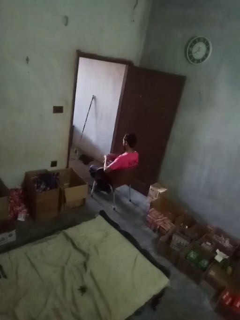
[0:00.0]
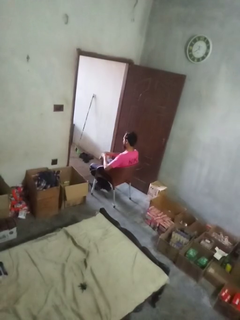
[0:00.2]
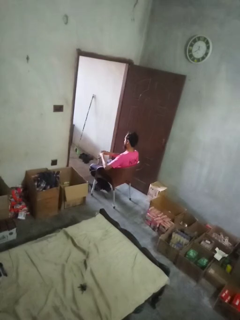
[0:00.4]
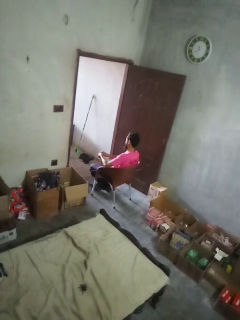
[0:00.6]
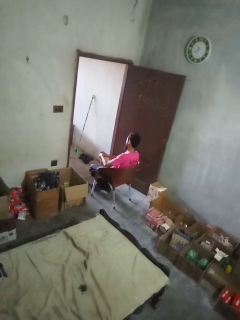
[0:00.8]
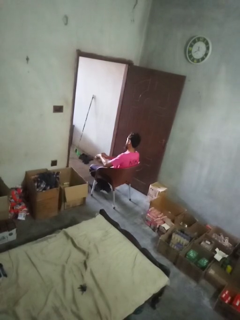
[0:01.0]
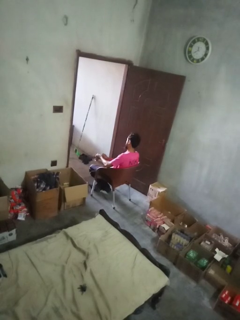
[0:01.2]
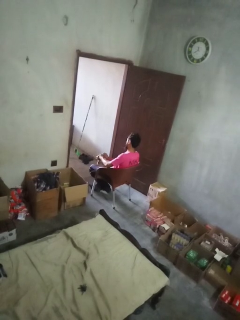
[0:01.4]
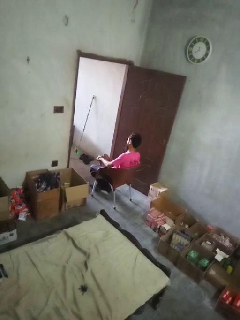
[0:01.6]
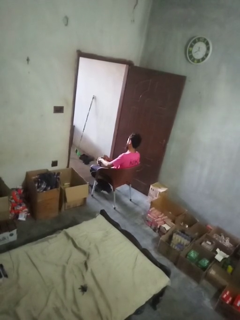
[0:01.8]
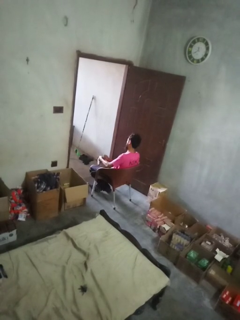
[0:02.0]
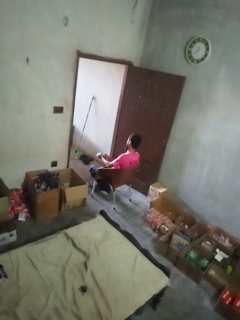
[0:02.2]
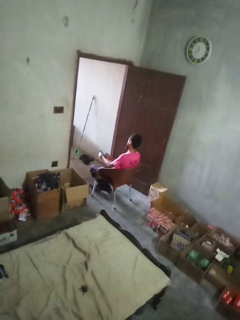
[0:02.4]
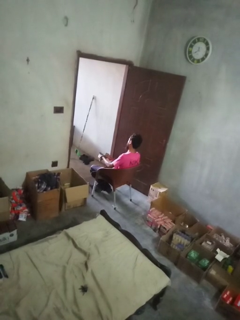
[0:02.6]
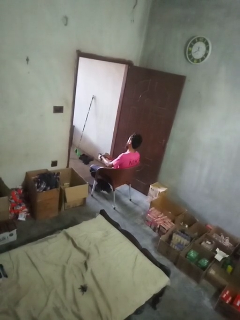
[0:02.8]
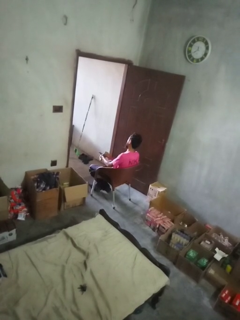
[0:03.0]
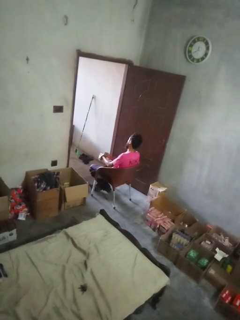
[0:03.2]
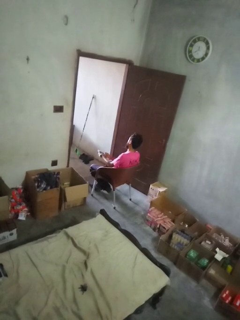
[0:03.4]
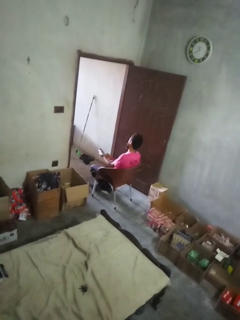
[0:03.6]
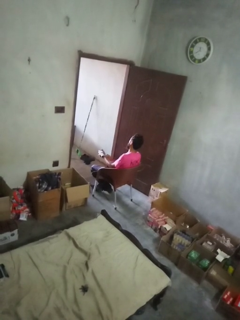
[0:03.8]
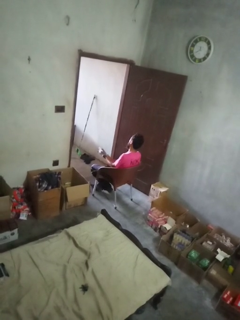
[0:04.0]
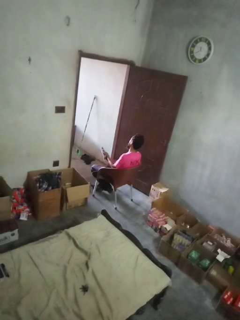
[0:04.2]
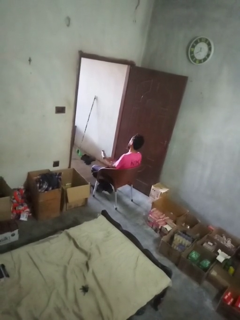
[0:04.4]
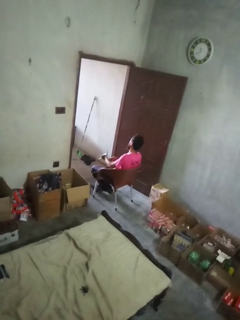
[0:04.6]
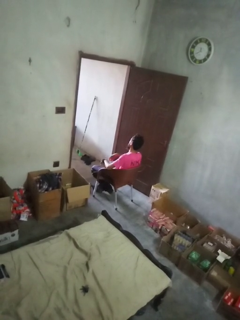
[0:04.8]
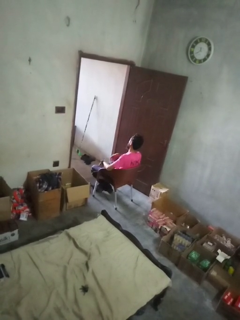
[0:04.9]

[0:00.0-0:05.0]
person puts on gloves

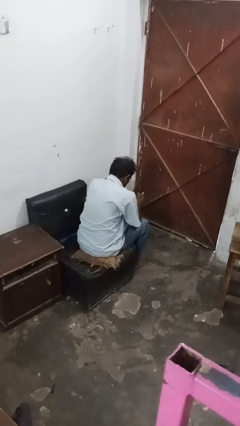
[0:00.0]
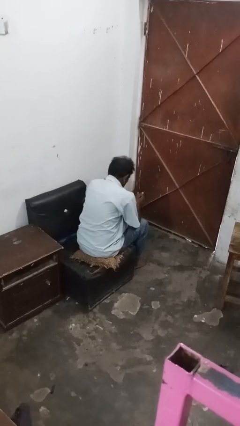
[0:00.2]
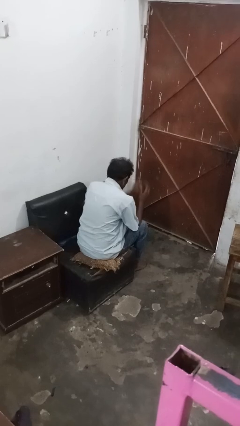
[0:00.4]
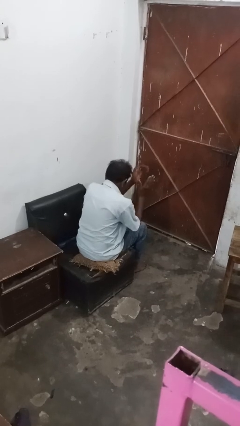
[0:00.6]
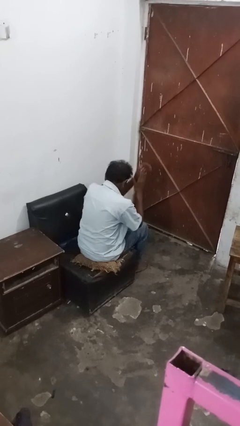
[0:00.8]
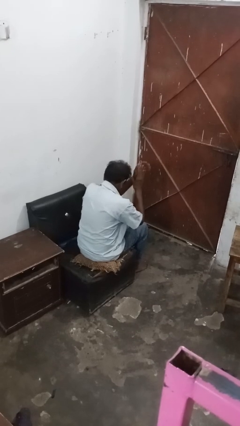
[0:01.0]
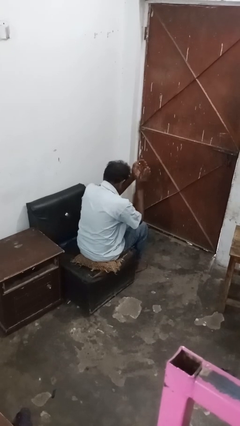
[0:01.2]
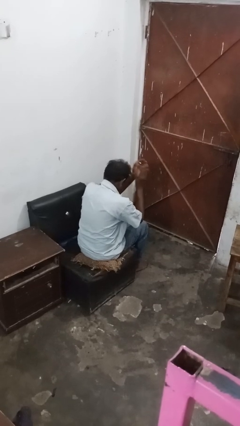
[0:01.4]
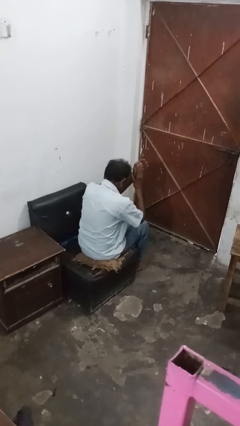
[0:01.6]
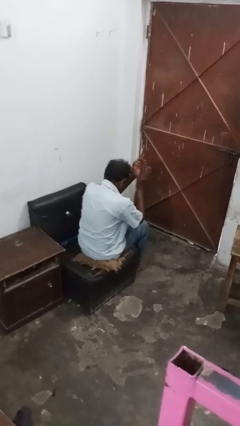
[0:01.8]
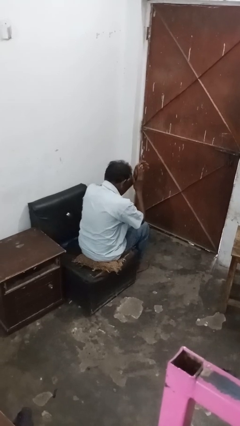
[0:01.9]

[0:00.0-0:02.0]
person claps hands

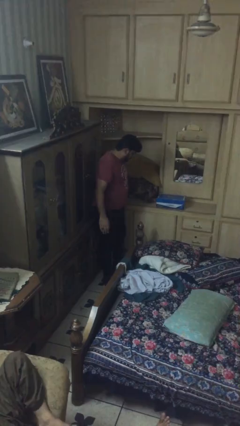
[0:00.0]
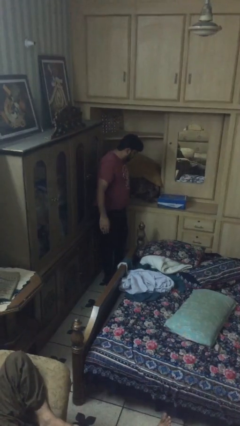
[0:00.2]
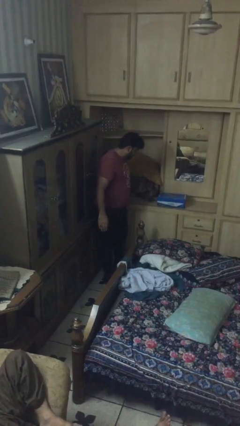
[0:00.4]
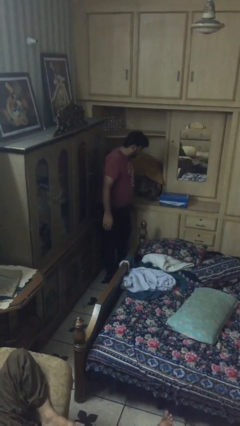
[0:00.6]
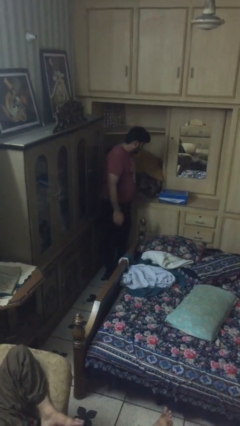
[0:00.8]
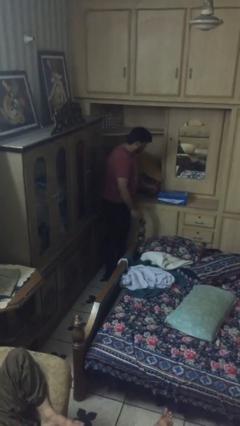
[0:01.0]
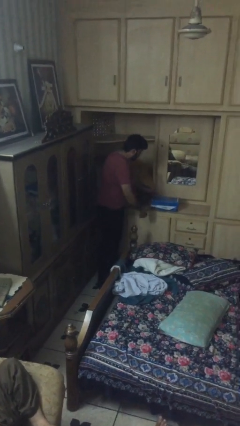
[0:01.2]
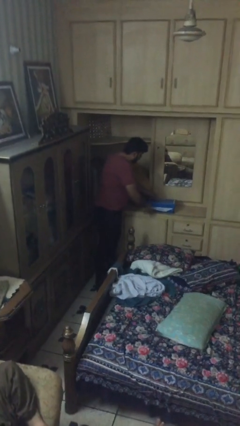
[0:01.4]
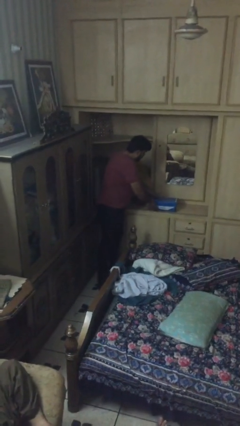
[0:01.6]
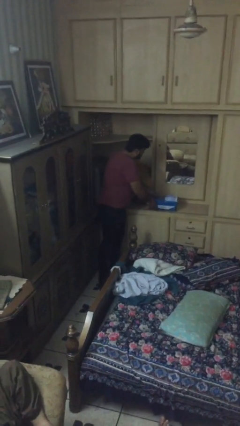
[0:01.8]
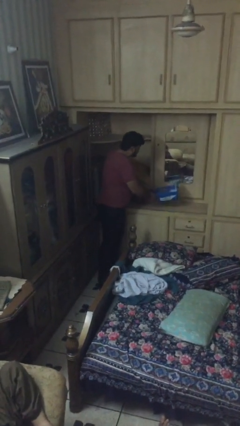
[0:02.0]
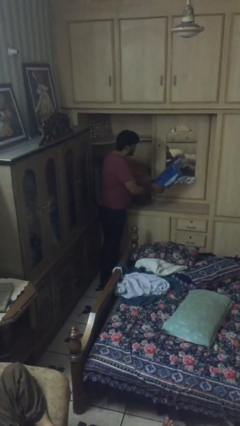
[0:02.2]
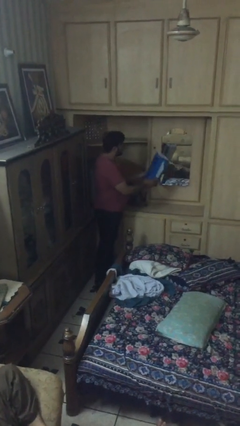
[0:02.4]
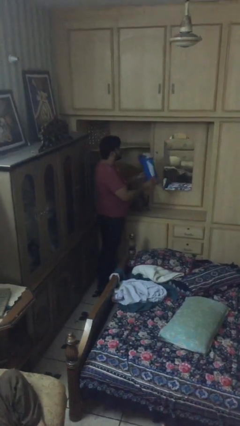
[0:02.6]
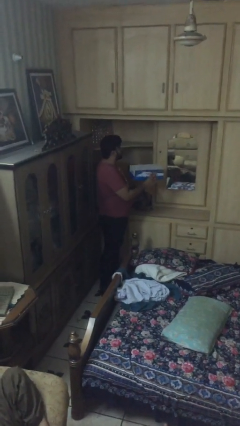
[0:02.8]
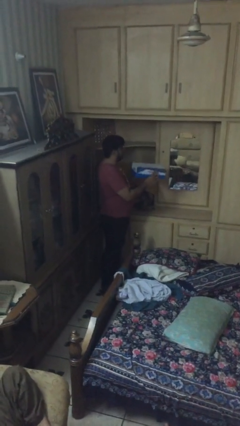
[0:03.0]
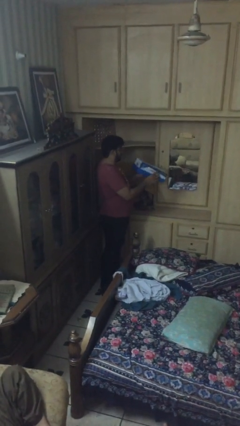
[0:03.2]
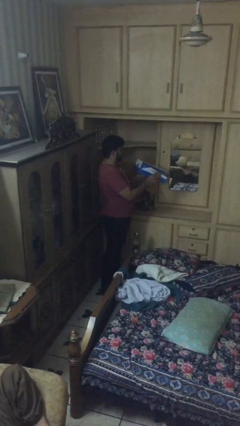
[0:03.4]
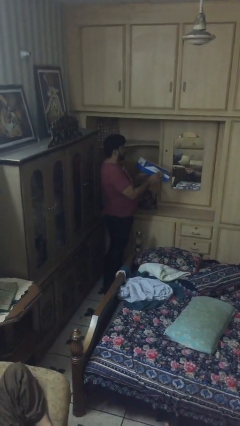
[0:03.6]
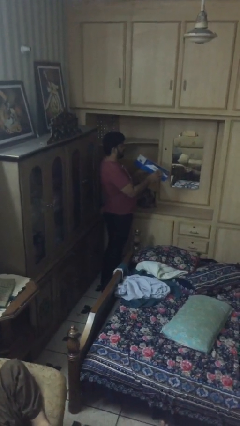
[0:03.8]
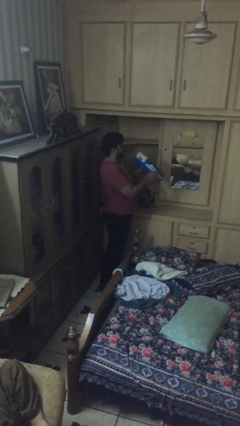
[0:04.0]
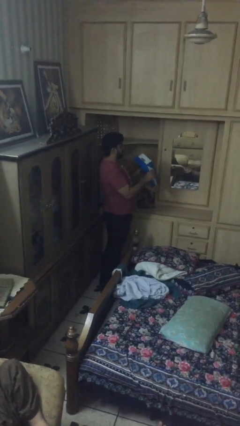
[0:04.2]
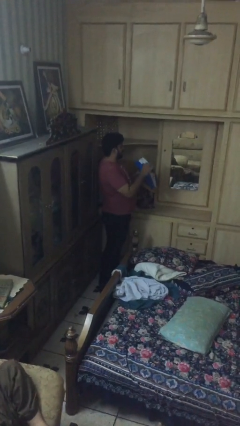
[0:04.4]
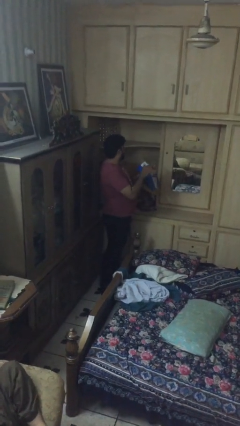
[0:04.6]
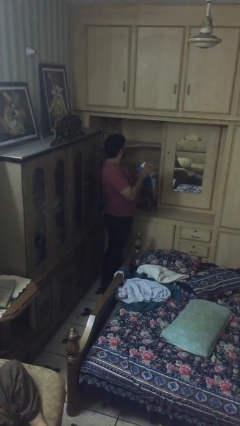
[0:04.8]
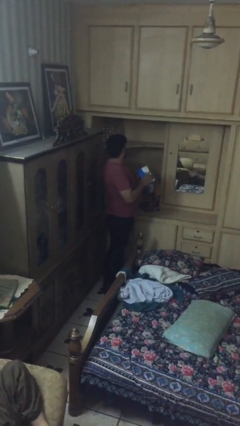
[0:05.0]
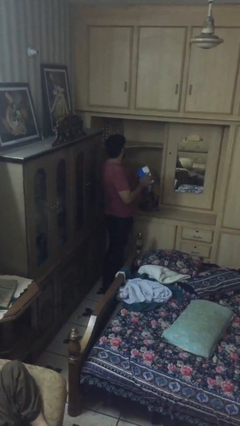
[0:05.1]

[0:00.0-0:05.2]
person picks up object from table

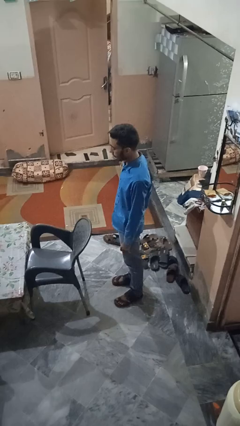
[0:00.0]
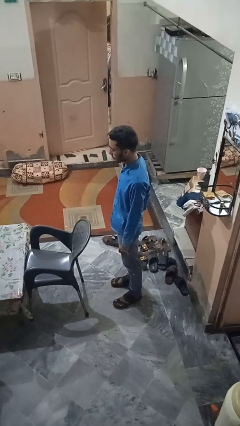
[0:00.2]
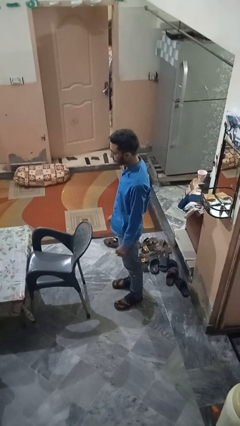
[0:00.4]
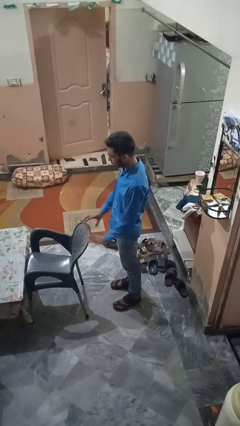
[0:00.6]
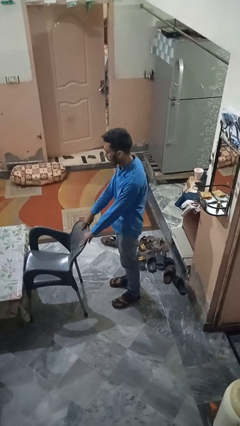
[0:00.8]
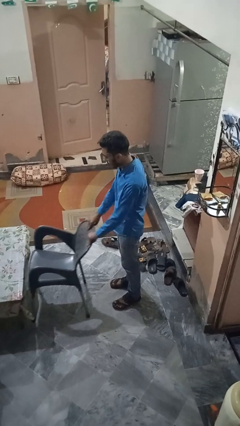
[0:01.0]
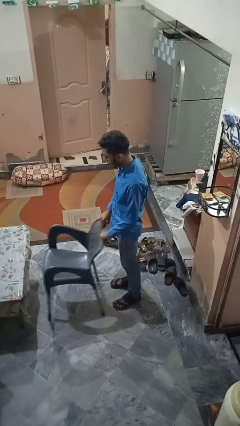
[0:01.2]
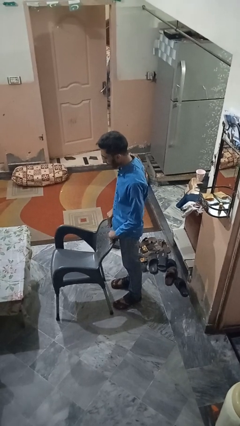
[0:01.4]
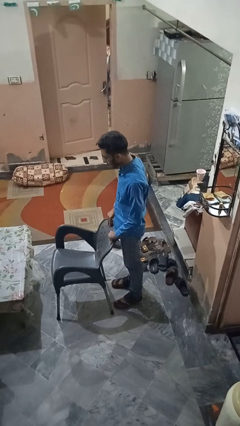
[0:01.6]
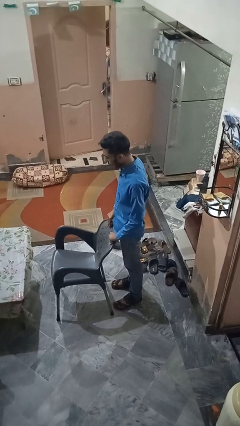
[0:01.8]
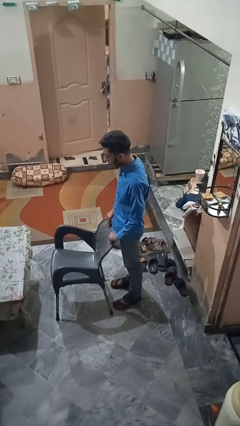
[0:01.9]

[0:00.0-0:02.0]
person pulls out chair

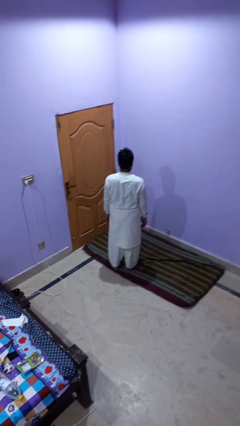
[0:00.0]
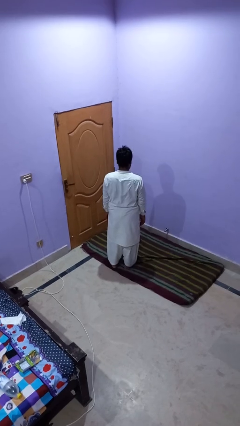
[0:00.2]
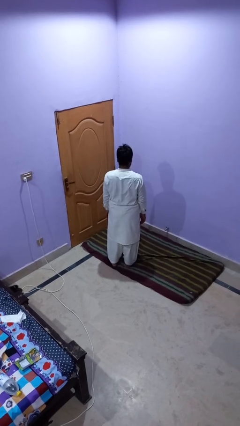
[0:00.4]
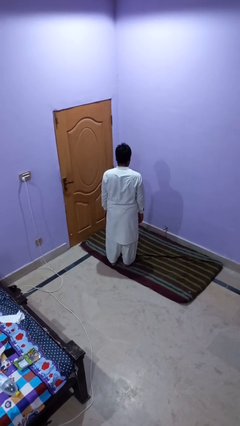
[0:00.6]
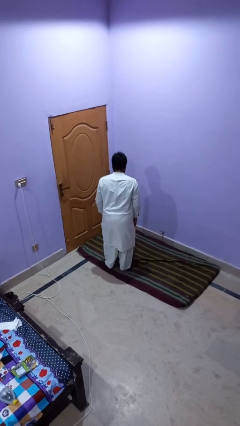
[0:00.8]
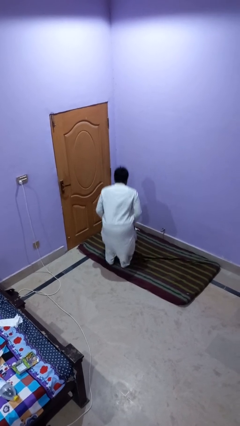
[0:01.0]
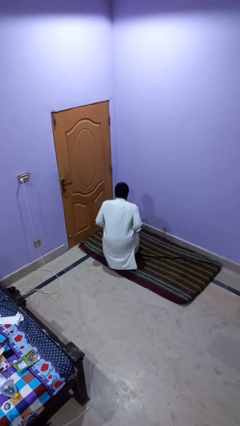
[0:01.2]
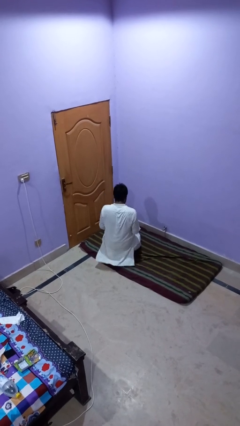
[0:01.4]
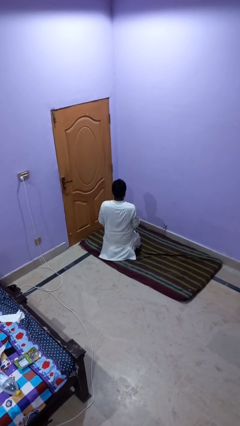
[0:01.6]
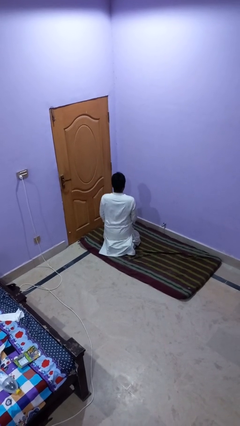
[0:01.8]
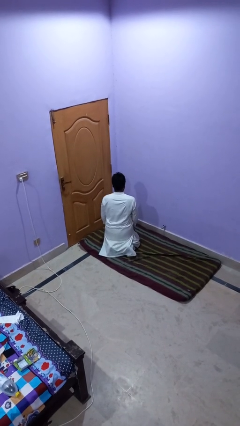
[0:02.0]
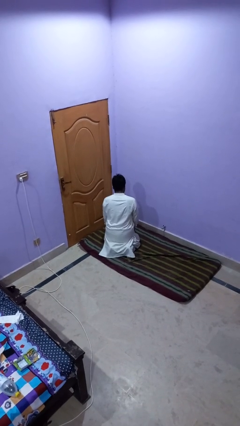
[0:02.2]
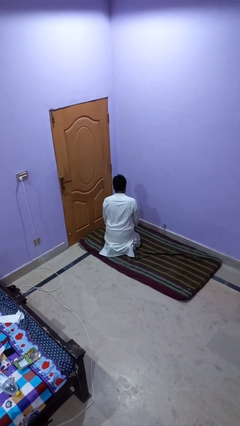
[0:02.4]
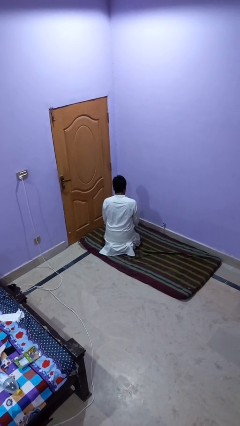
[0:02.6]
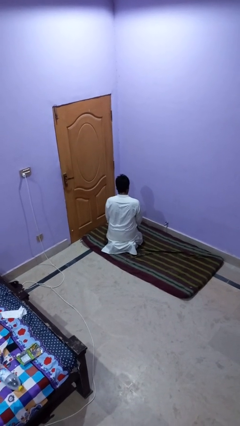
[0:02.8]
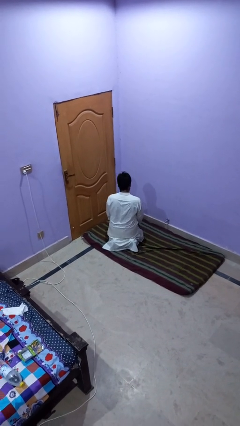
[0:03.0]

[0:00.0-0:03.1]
person kneels

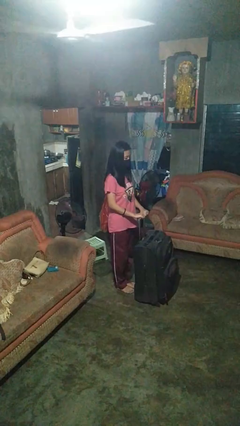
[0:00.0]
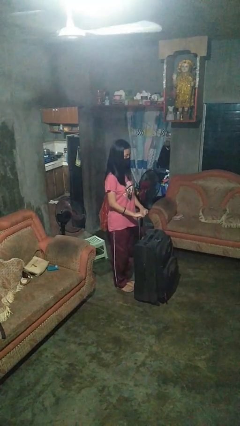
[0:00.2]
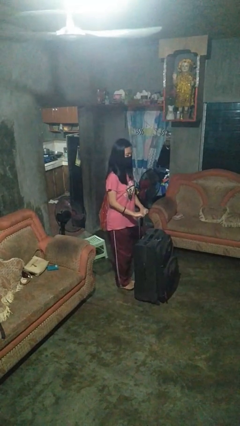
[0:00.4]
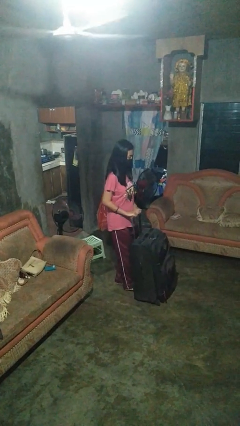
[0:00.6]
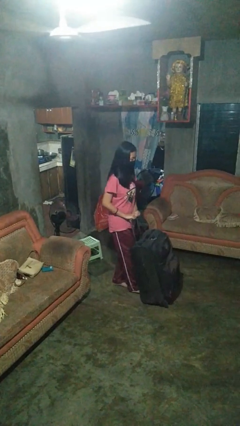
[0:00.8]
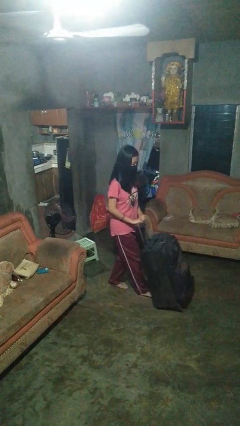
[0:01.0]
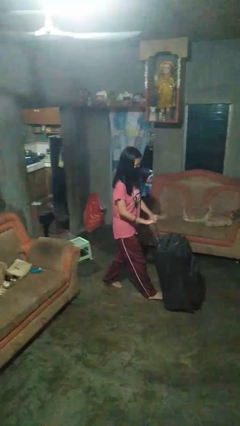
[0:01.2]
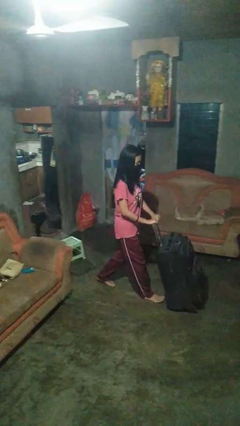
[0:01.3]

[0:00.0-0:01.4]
person pushes wheeled cart
